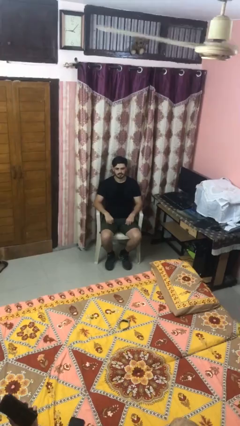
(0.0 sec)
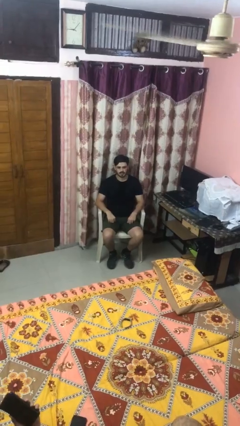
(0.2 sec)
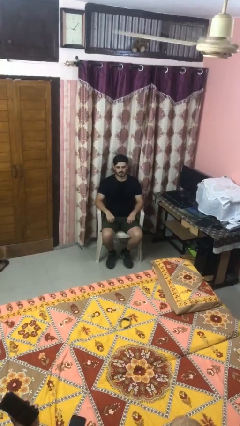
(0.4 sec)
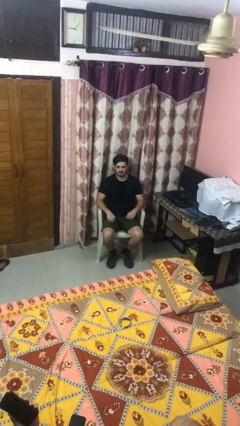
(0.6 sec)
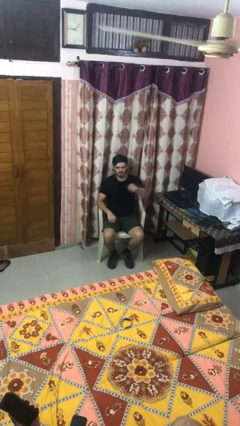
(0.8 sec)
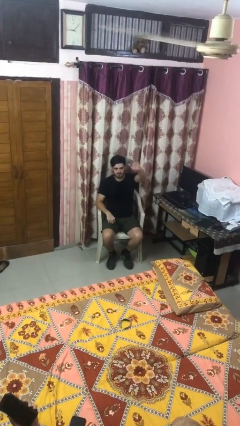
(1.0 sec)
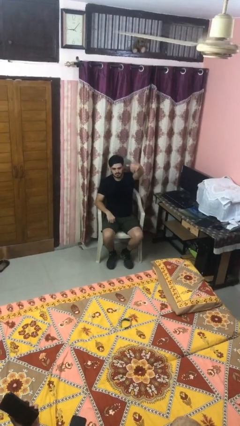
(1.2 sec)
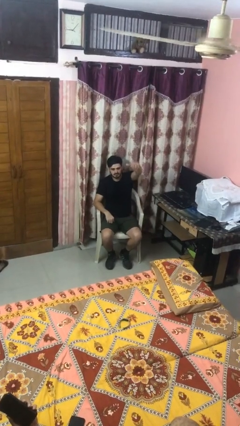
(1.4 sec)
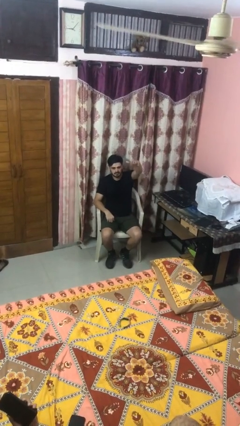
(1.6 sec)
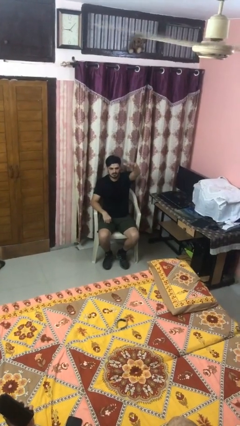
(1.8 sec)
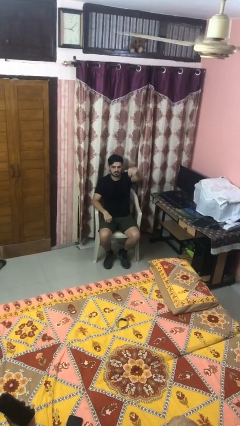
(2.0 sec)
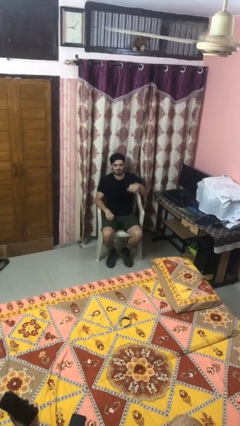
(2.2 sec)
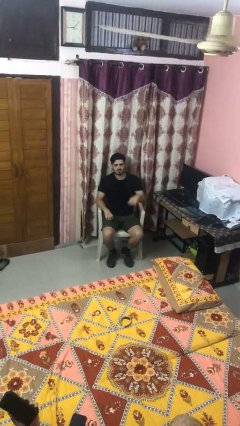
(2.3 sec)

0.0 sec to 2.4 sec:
person gestures come here

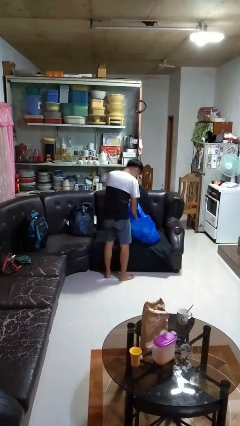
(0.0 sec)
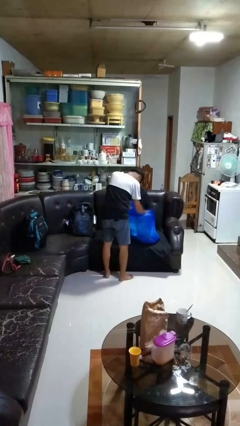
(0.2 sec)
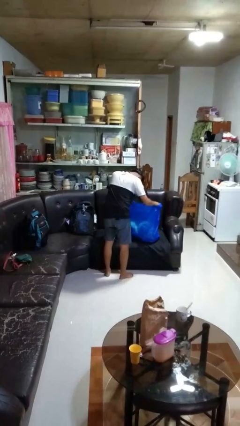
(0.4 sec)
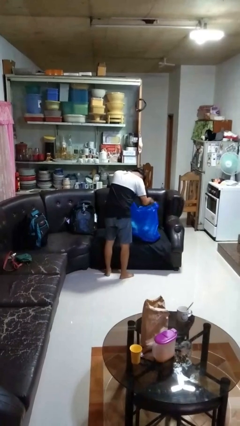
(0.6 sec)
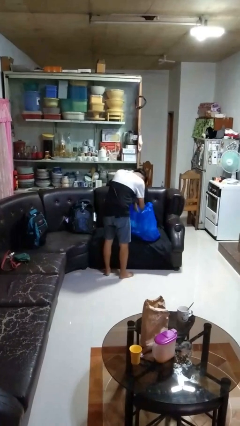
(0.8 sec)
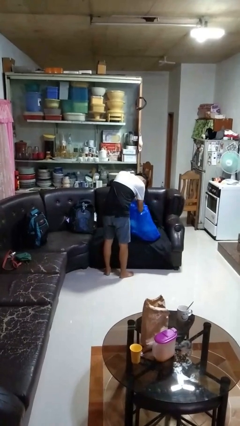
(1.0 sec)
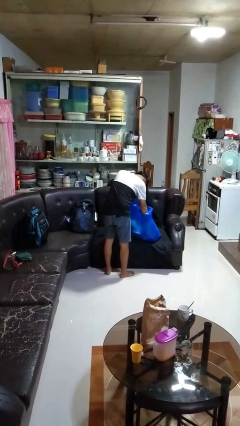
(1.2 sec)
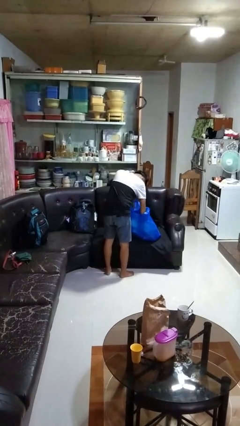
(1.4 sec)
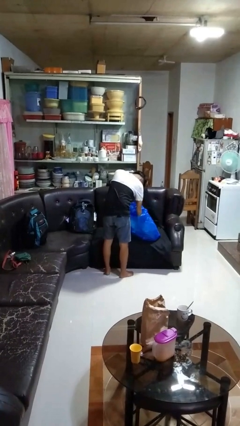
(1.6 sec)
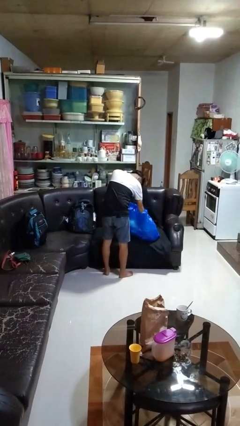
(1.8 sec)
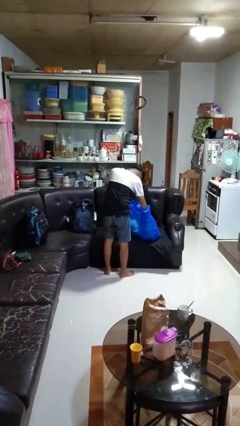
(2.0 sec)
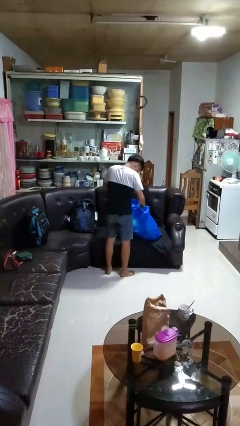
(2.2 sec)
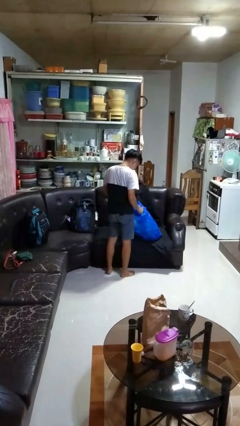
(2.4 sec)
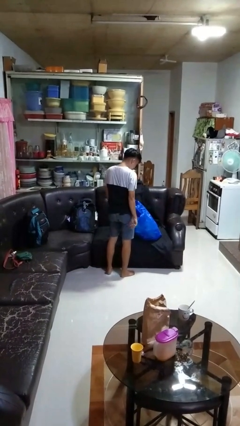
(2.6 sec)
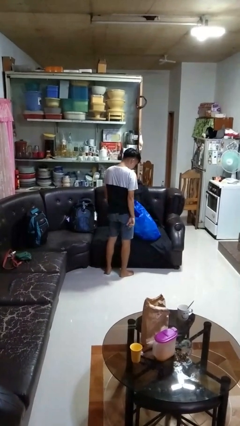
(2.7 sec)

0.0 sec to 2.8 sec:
person searches in bag

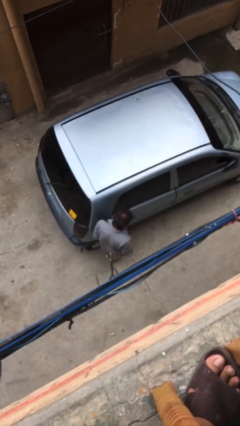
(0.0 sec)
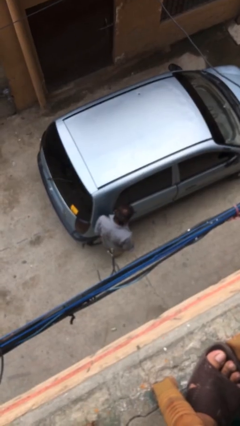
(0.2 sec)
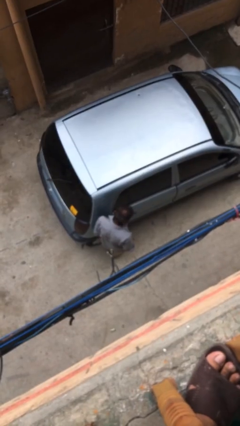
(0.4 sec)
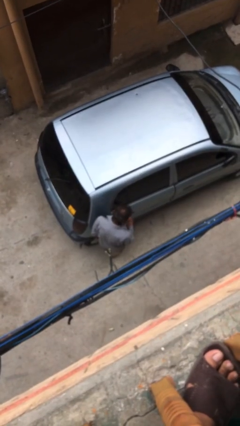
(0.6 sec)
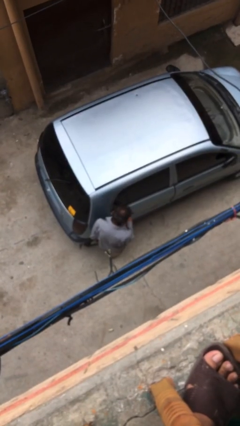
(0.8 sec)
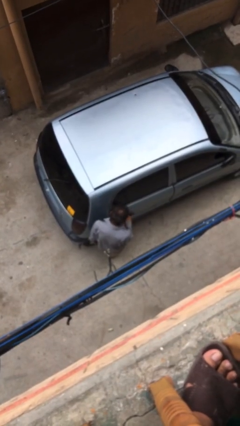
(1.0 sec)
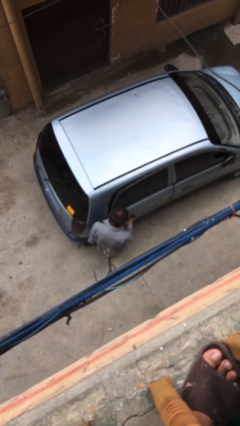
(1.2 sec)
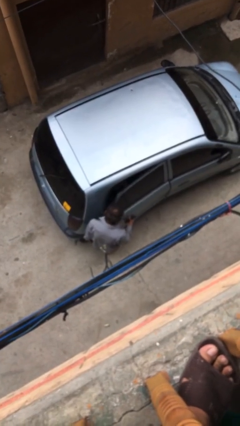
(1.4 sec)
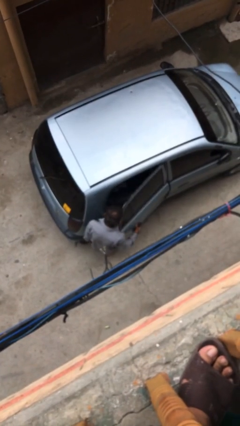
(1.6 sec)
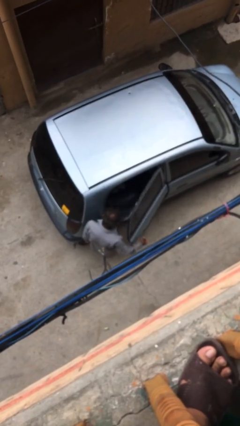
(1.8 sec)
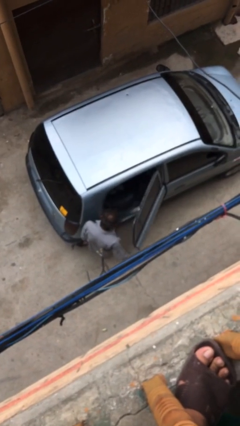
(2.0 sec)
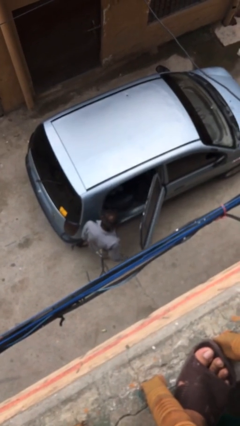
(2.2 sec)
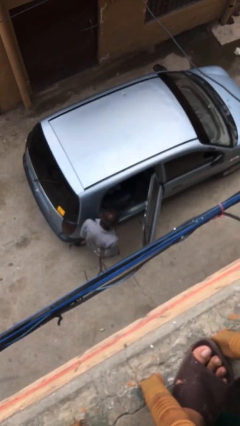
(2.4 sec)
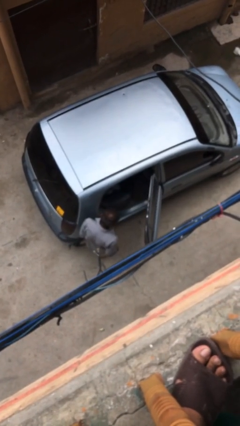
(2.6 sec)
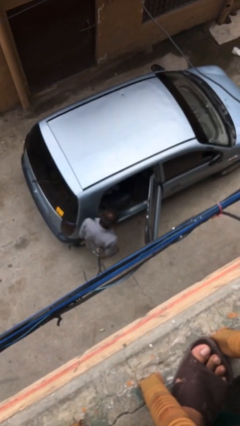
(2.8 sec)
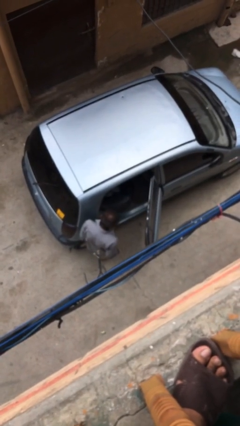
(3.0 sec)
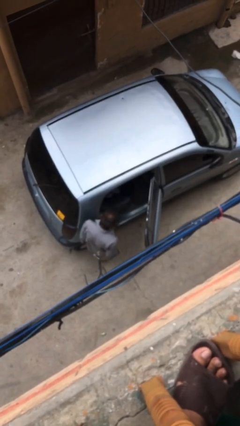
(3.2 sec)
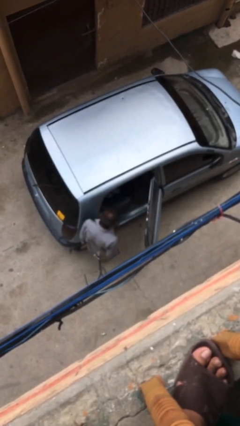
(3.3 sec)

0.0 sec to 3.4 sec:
person opens car door

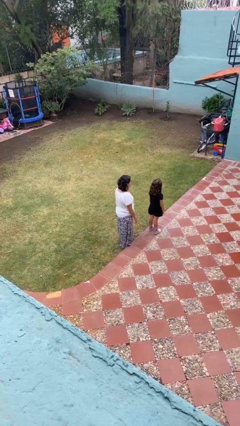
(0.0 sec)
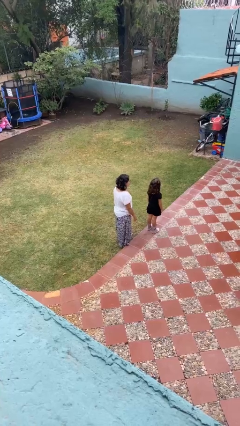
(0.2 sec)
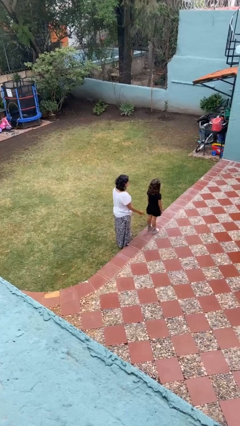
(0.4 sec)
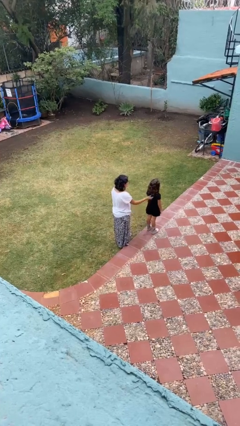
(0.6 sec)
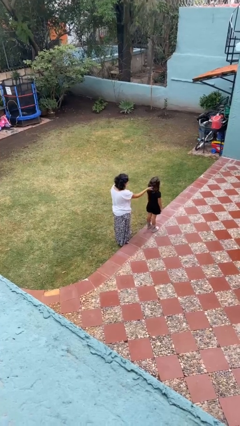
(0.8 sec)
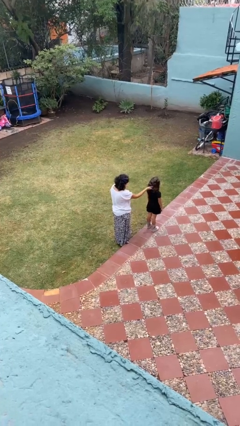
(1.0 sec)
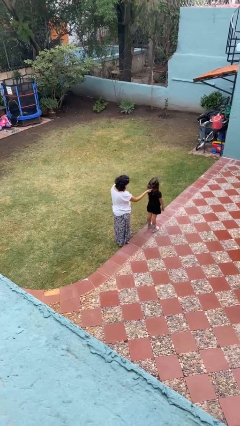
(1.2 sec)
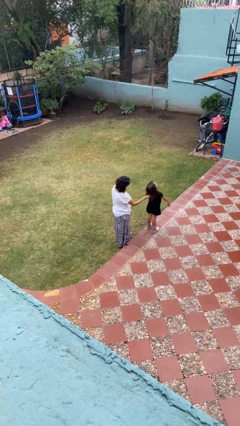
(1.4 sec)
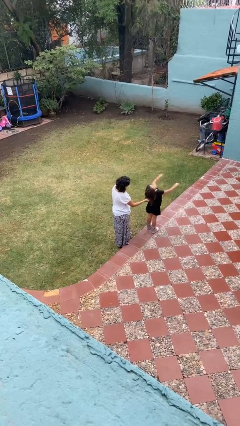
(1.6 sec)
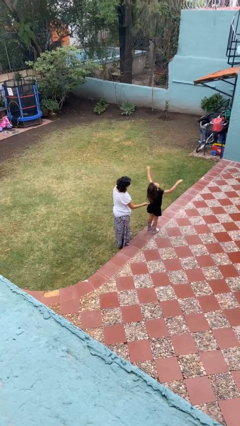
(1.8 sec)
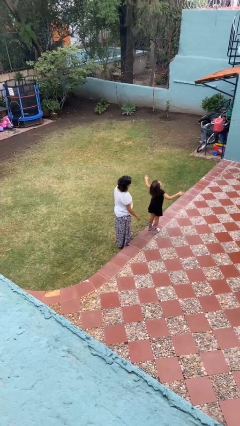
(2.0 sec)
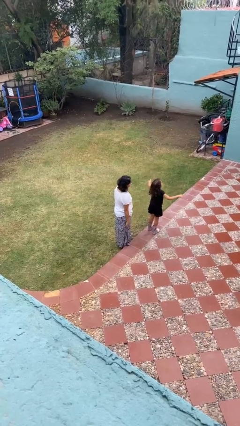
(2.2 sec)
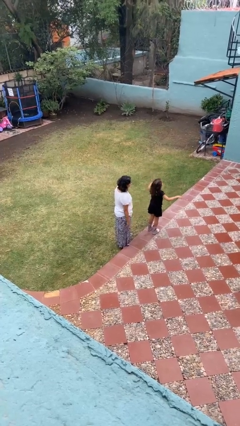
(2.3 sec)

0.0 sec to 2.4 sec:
person grabs person by hair

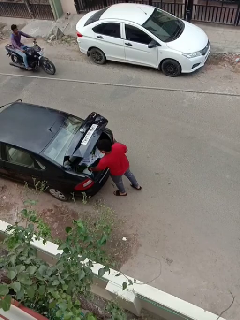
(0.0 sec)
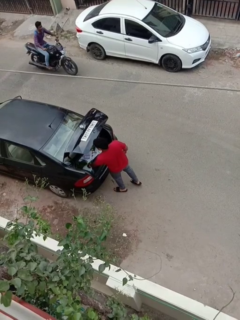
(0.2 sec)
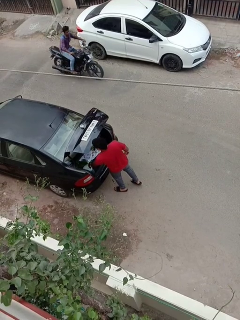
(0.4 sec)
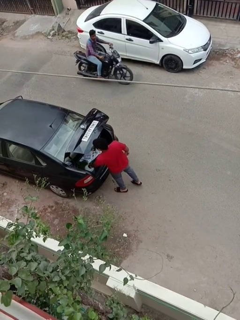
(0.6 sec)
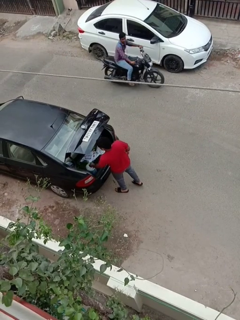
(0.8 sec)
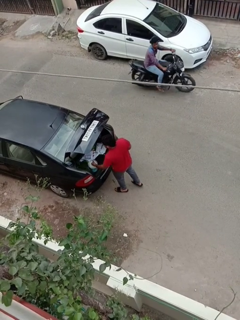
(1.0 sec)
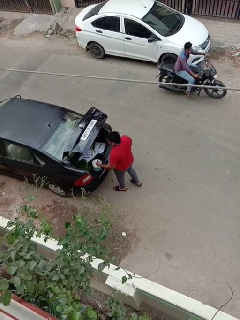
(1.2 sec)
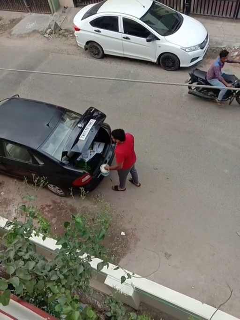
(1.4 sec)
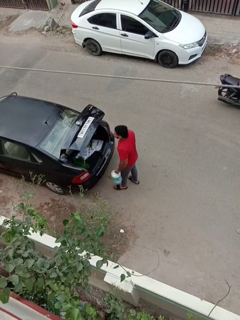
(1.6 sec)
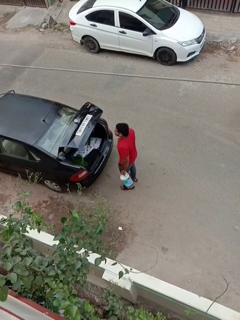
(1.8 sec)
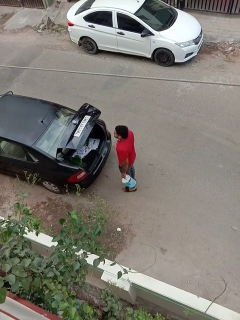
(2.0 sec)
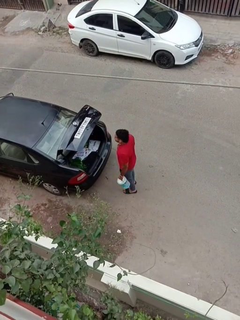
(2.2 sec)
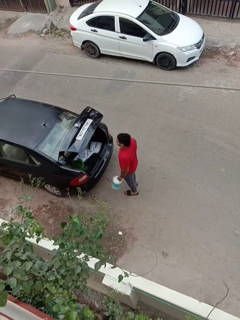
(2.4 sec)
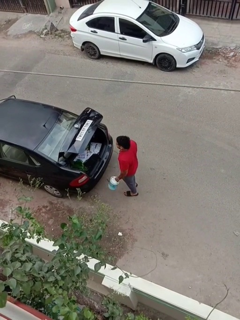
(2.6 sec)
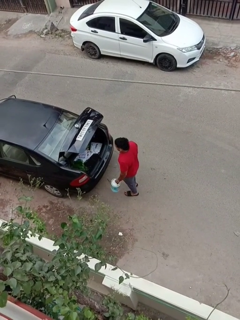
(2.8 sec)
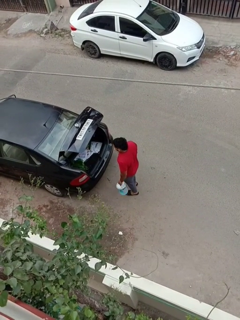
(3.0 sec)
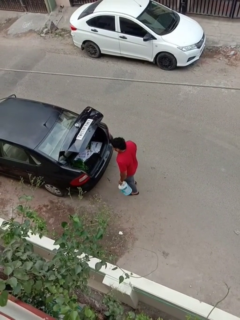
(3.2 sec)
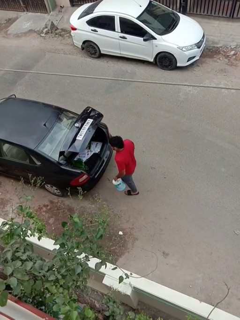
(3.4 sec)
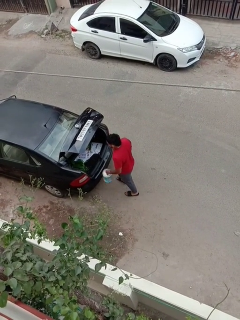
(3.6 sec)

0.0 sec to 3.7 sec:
person unloads car

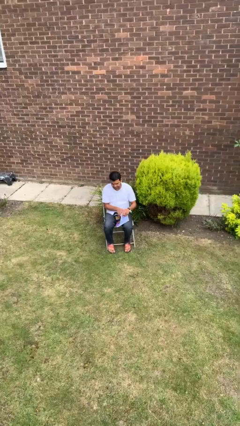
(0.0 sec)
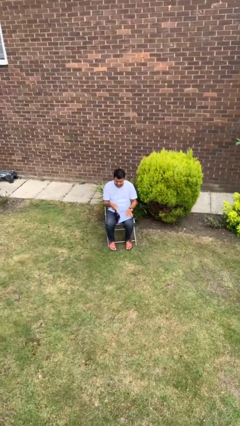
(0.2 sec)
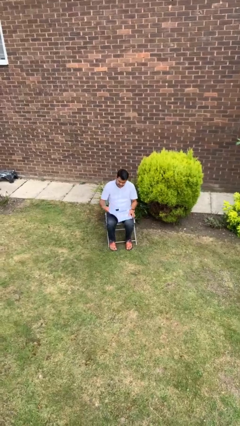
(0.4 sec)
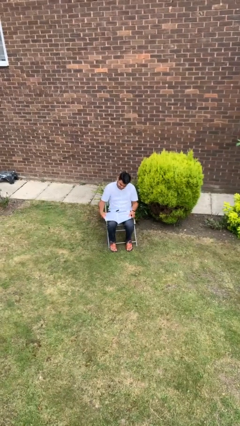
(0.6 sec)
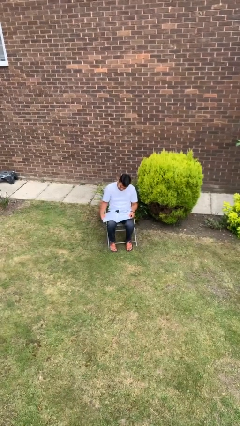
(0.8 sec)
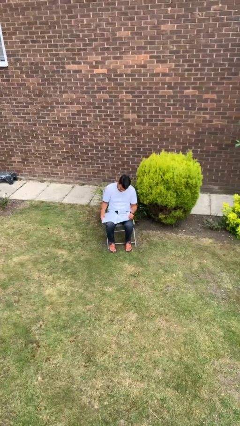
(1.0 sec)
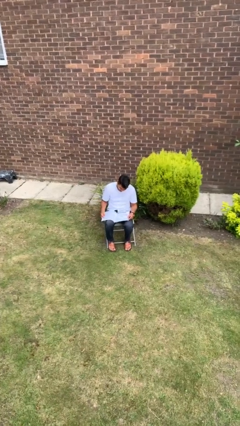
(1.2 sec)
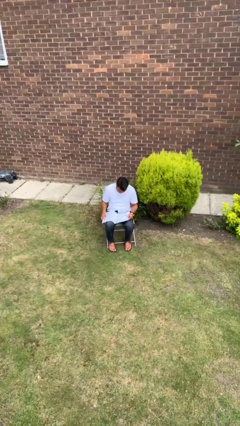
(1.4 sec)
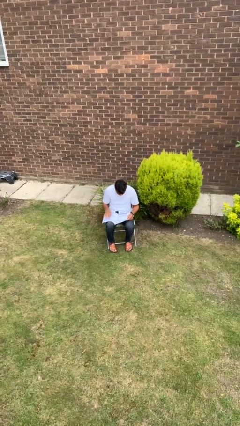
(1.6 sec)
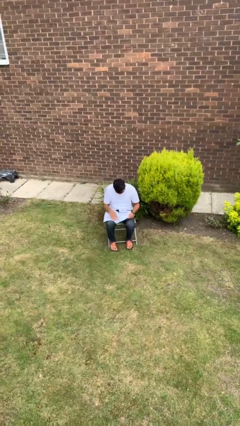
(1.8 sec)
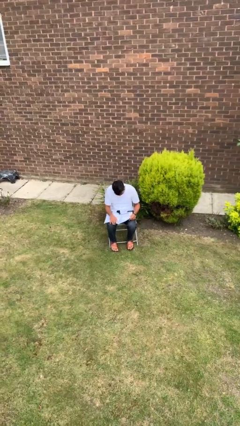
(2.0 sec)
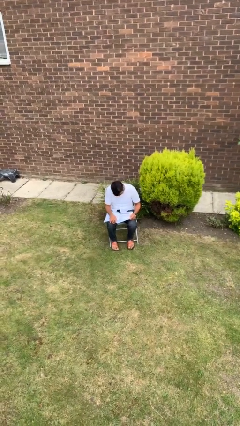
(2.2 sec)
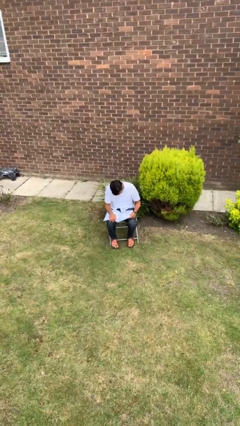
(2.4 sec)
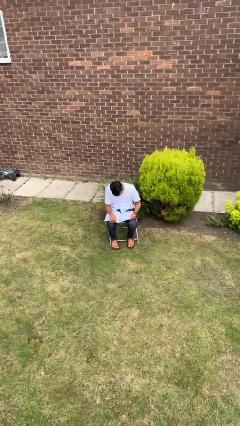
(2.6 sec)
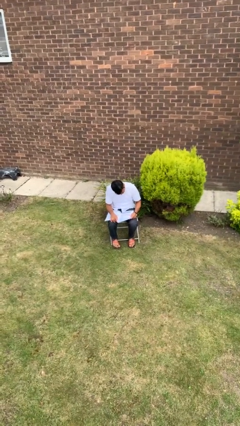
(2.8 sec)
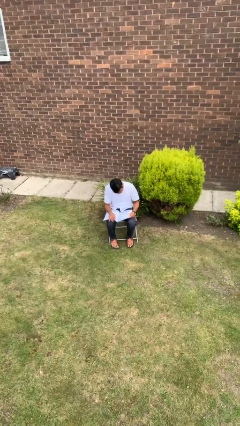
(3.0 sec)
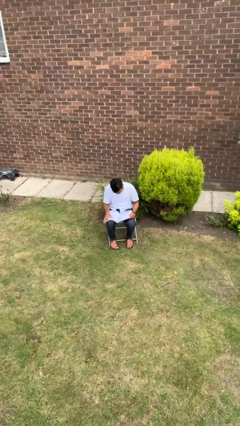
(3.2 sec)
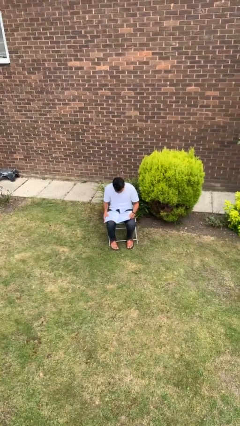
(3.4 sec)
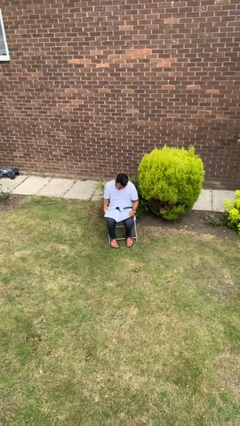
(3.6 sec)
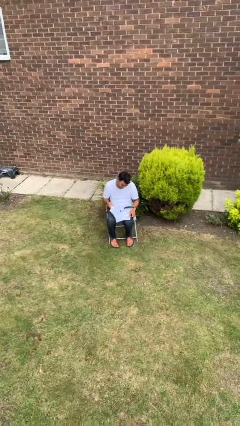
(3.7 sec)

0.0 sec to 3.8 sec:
person reads book
